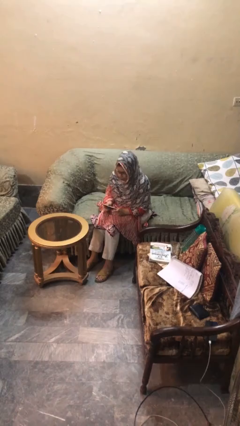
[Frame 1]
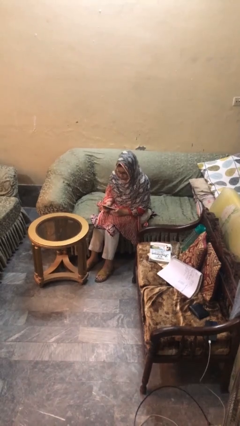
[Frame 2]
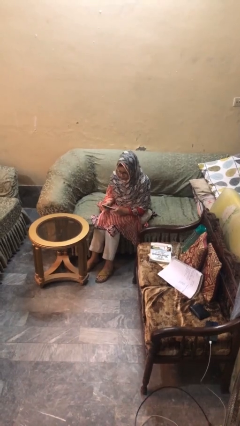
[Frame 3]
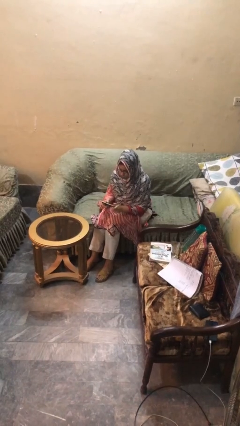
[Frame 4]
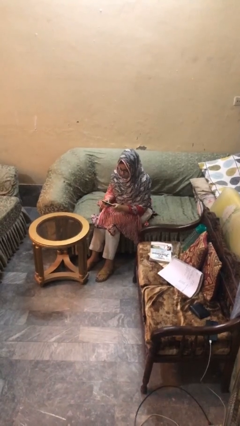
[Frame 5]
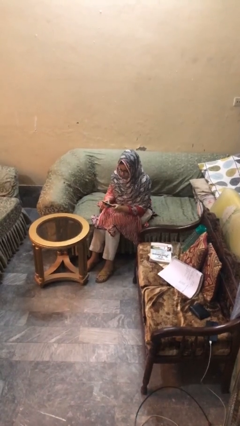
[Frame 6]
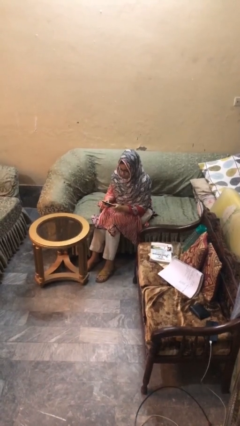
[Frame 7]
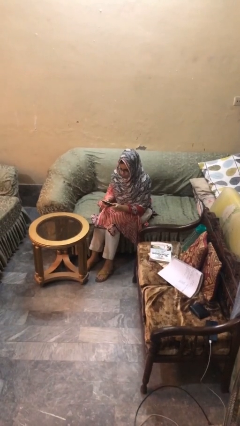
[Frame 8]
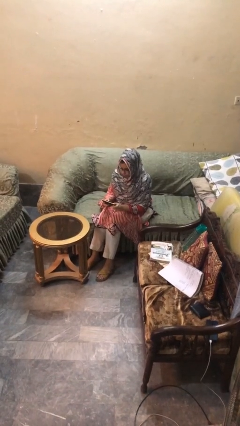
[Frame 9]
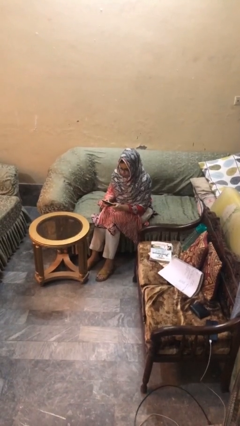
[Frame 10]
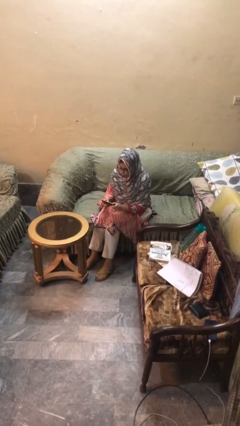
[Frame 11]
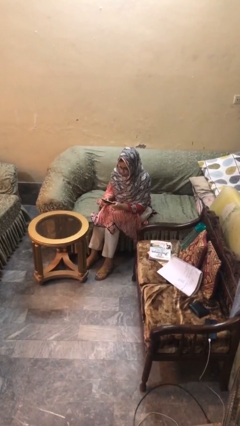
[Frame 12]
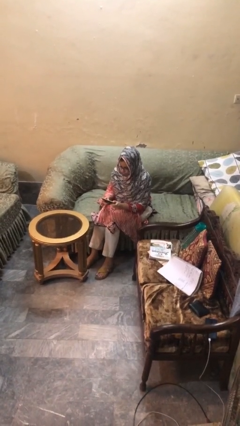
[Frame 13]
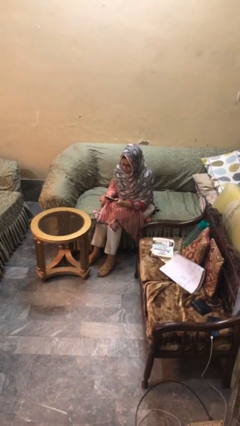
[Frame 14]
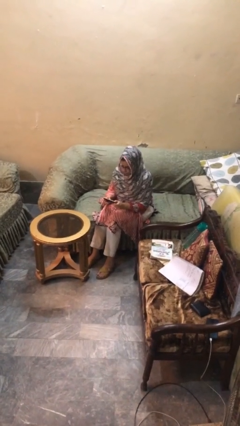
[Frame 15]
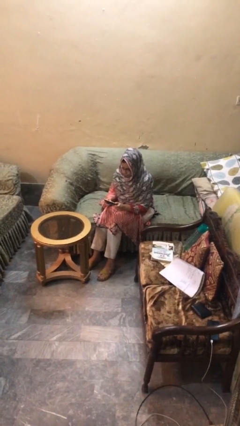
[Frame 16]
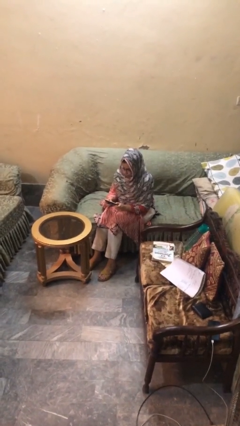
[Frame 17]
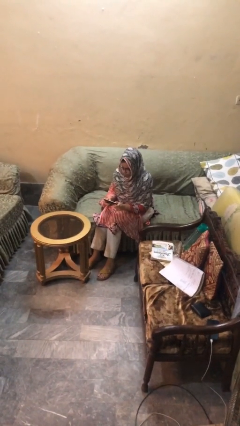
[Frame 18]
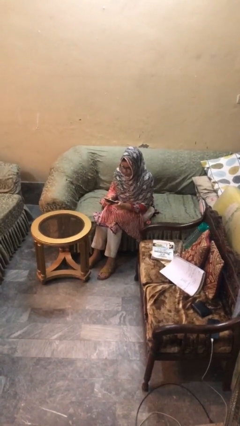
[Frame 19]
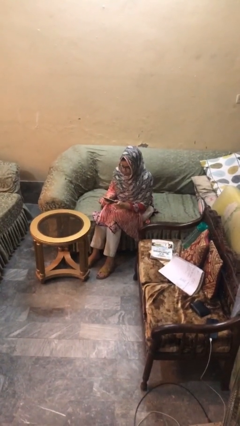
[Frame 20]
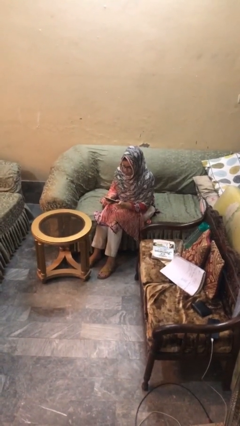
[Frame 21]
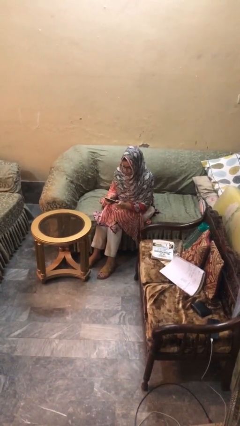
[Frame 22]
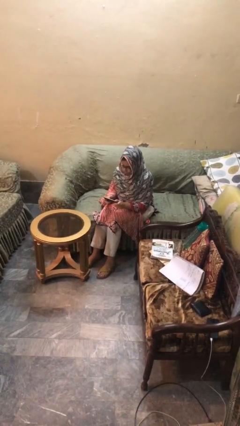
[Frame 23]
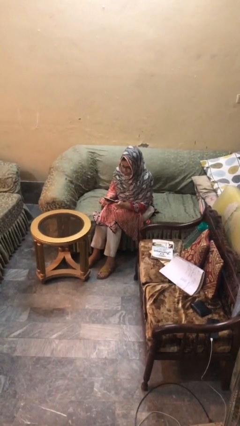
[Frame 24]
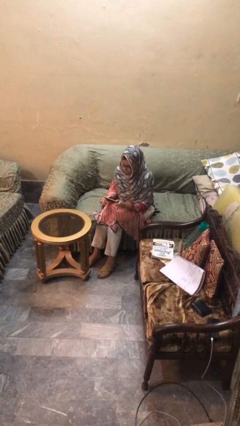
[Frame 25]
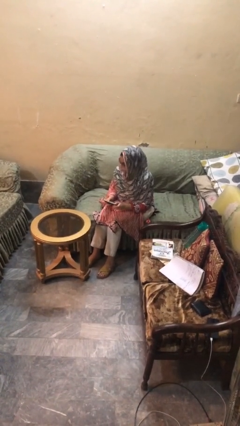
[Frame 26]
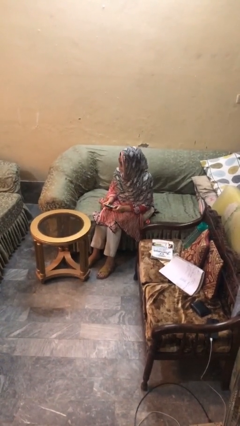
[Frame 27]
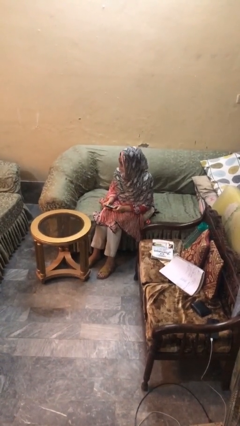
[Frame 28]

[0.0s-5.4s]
person interacts with handheld game

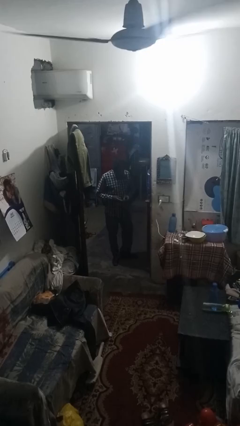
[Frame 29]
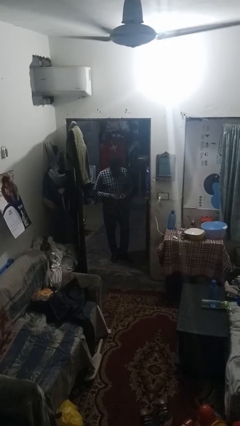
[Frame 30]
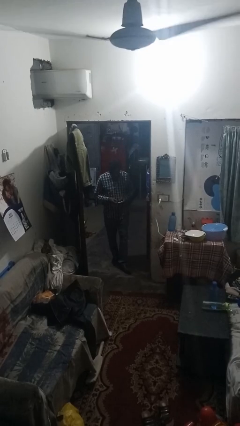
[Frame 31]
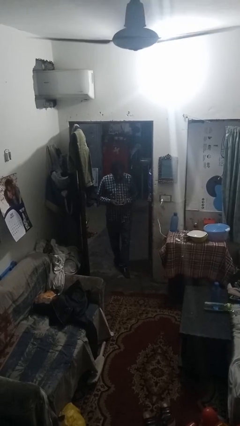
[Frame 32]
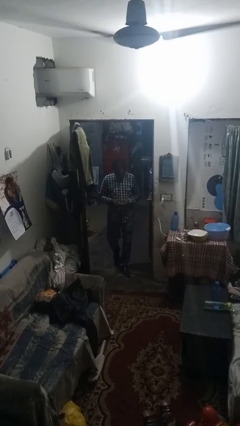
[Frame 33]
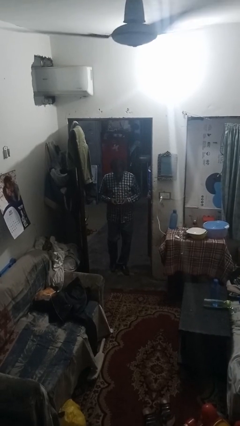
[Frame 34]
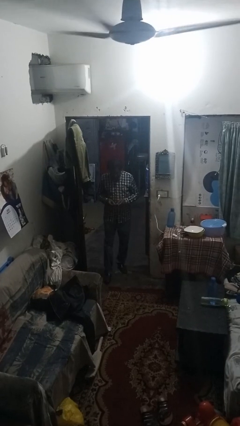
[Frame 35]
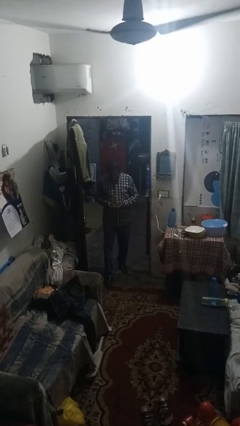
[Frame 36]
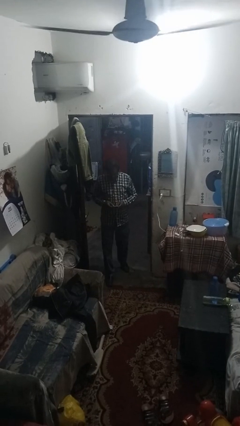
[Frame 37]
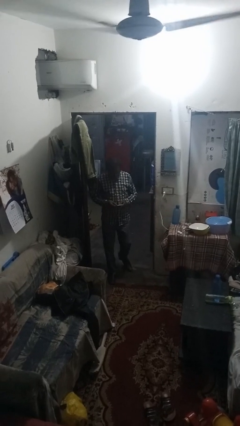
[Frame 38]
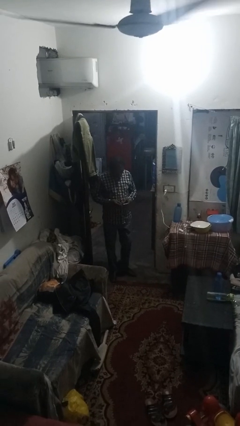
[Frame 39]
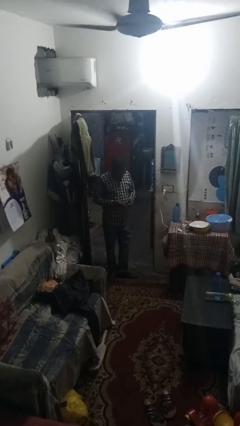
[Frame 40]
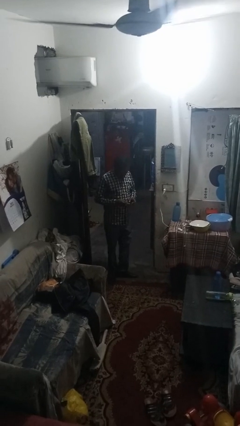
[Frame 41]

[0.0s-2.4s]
person enters scene through structure

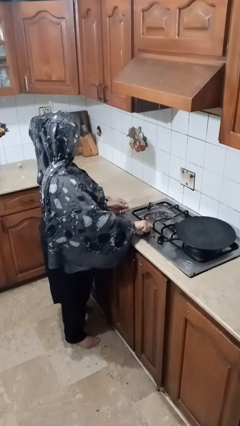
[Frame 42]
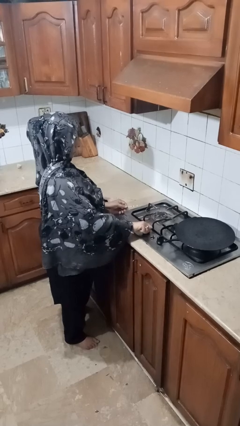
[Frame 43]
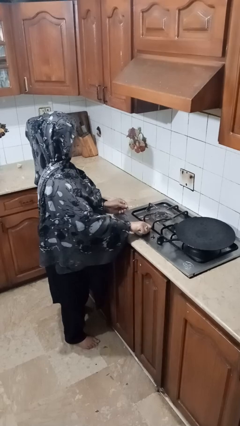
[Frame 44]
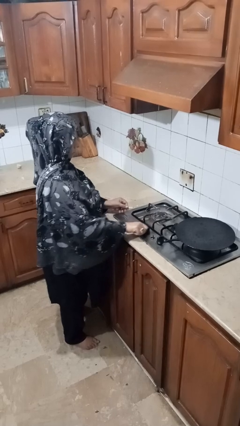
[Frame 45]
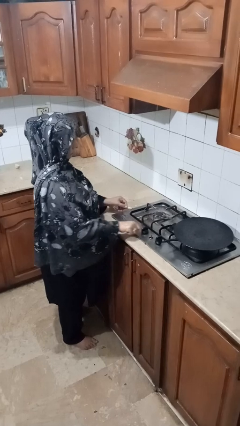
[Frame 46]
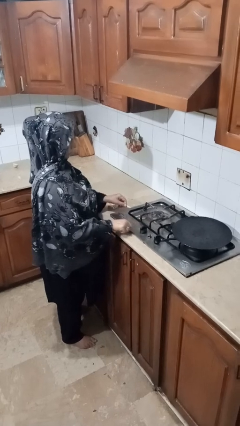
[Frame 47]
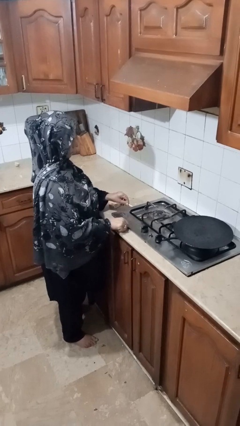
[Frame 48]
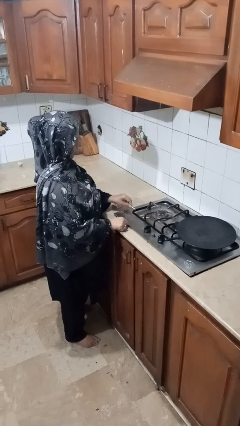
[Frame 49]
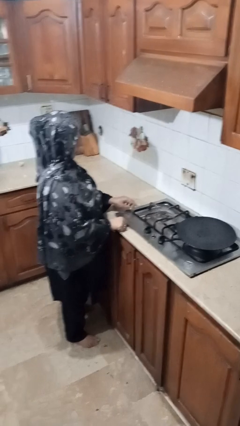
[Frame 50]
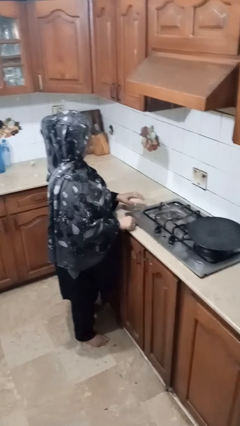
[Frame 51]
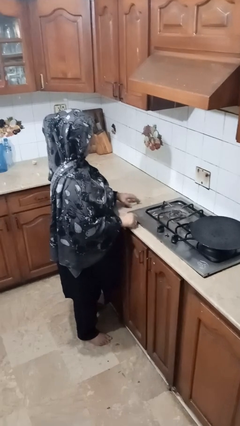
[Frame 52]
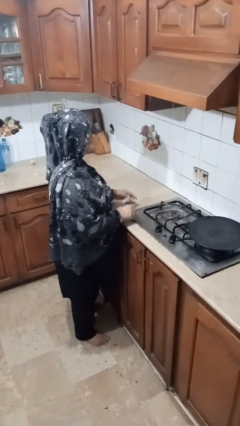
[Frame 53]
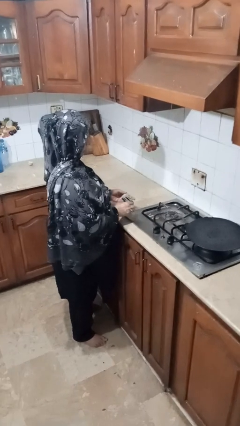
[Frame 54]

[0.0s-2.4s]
person turns off stovetop

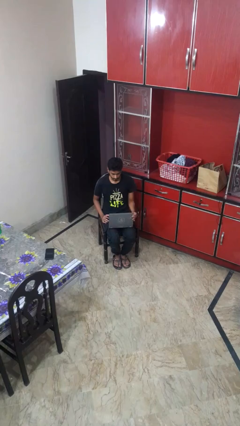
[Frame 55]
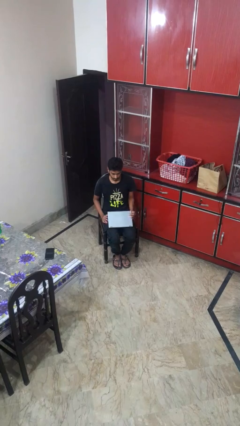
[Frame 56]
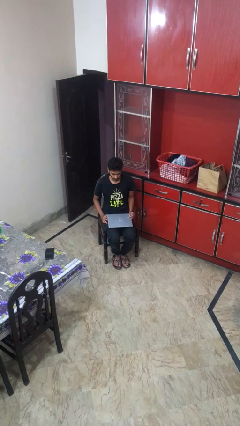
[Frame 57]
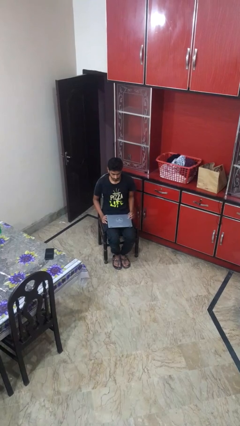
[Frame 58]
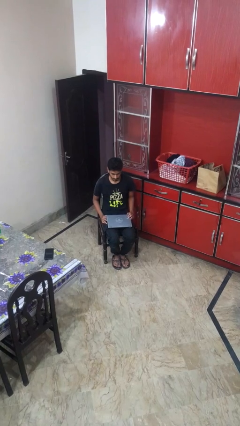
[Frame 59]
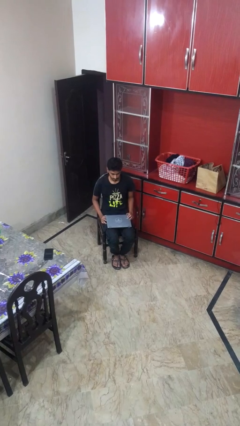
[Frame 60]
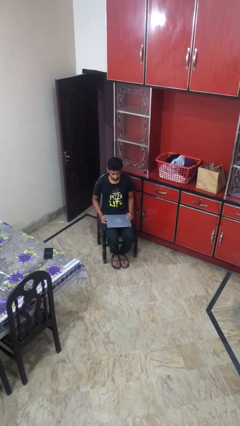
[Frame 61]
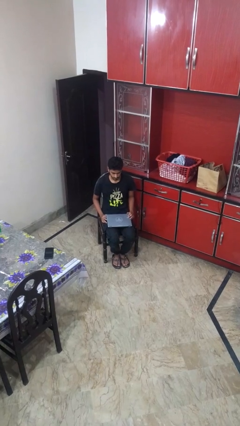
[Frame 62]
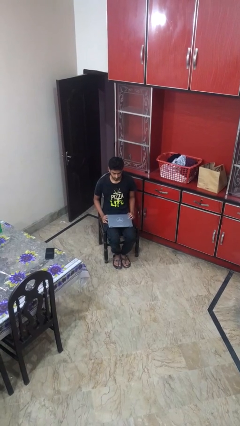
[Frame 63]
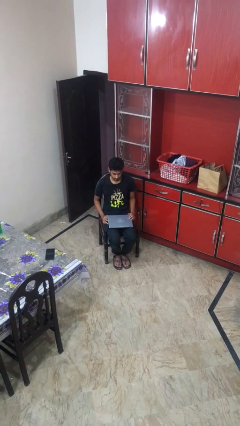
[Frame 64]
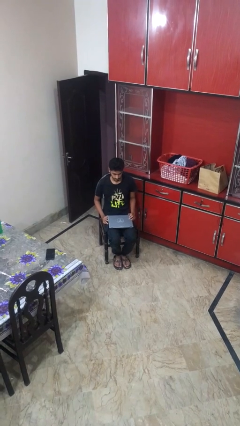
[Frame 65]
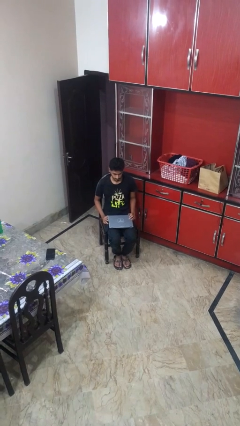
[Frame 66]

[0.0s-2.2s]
person closes laptop

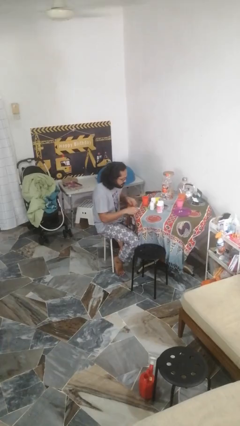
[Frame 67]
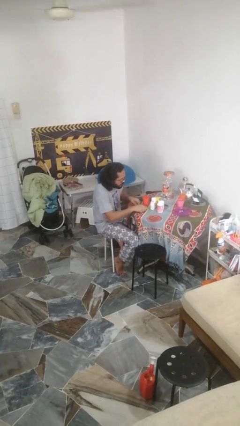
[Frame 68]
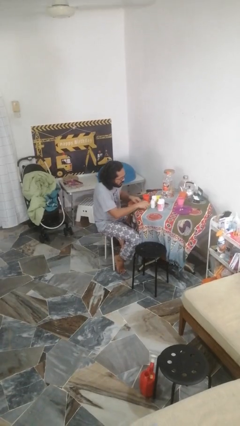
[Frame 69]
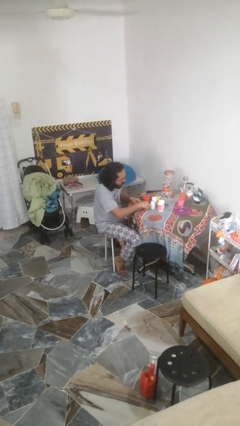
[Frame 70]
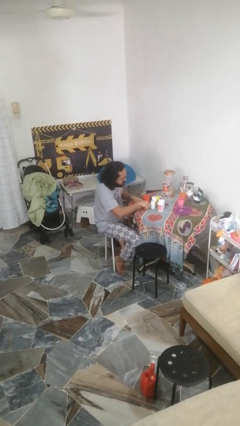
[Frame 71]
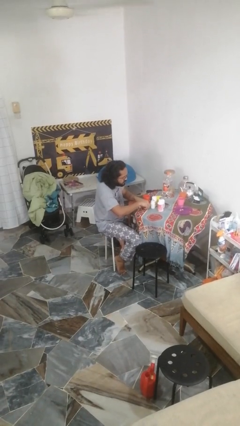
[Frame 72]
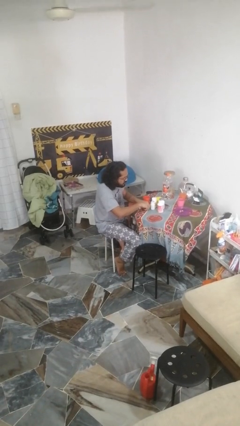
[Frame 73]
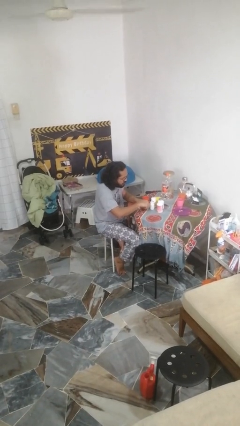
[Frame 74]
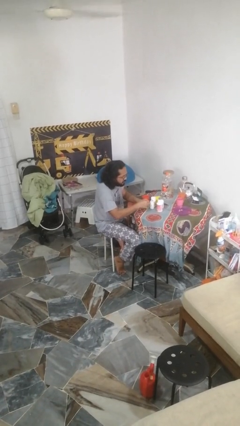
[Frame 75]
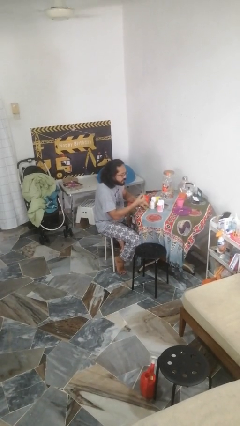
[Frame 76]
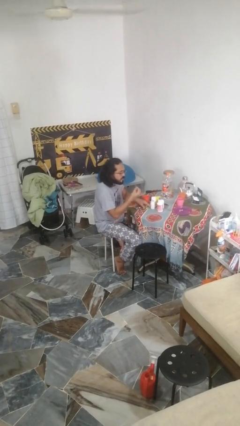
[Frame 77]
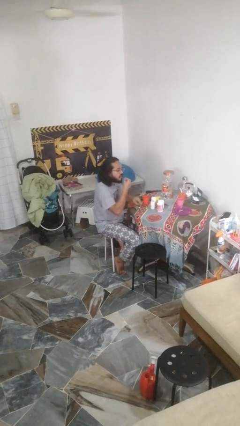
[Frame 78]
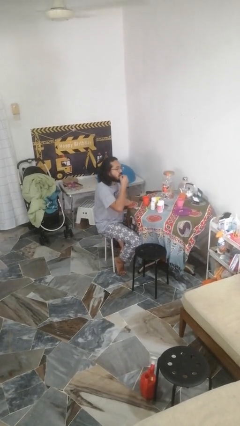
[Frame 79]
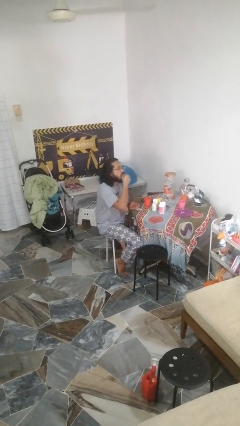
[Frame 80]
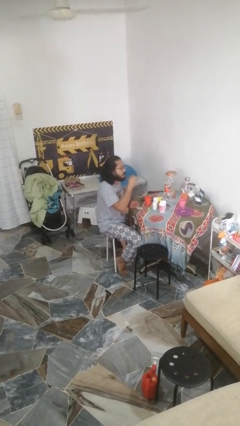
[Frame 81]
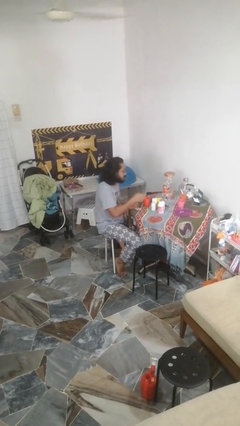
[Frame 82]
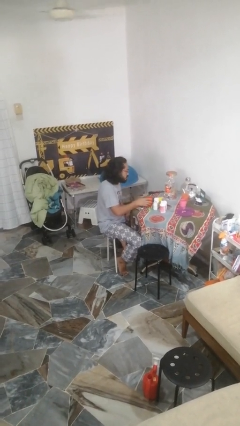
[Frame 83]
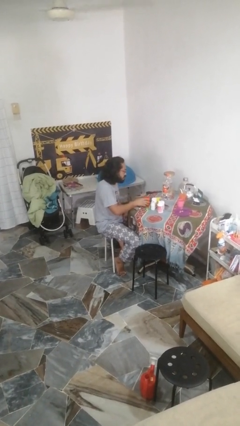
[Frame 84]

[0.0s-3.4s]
person takes medicine pills

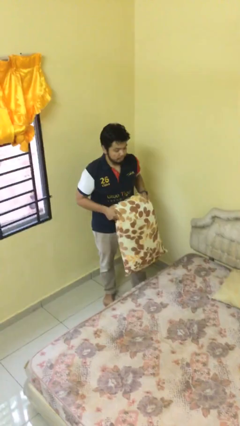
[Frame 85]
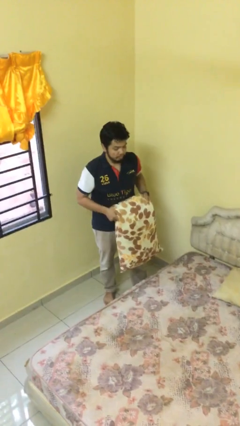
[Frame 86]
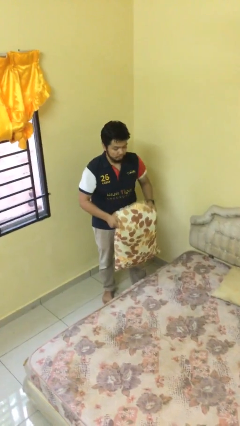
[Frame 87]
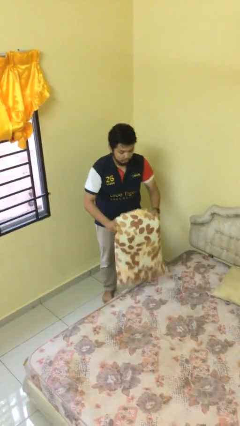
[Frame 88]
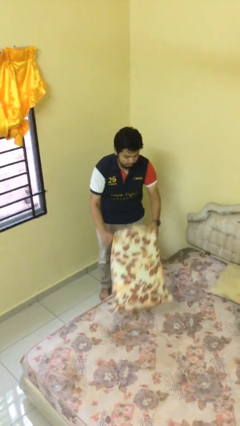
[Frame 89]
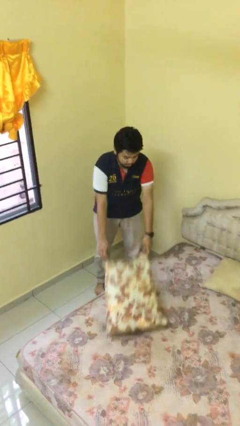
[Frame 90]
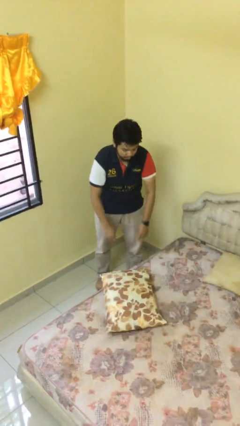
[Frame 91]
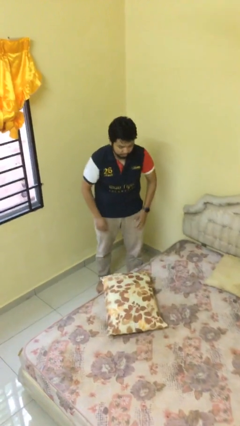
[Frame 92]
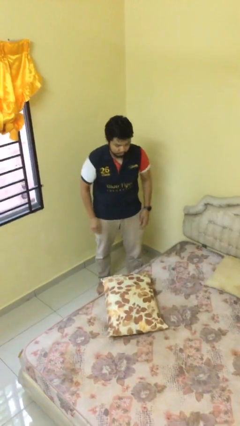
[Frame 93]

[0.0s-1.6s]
person puts down object on bed

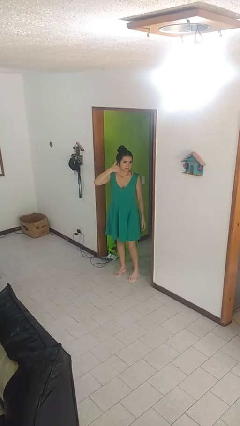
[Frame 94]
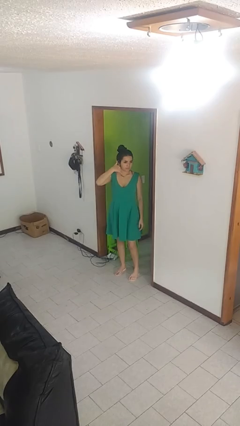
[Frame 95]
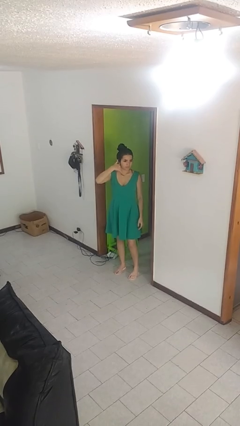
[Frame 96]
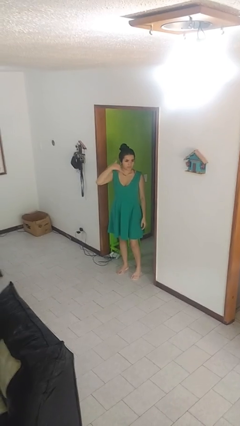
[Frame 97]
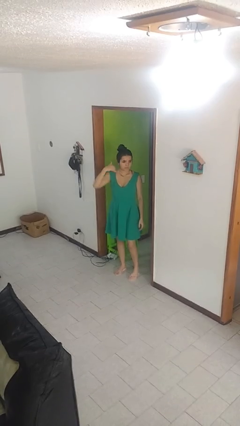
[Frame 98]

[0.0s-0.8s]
person gestures call me
